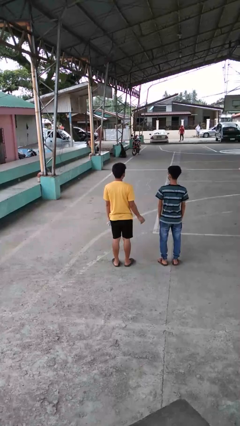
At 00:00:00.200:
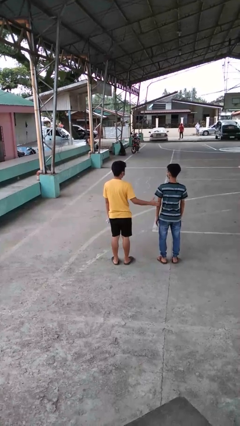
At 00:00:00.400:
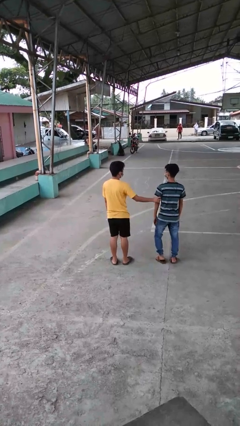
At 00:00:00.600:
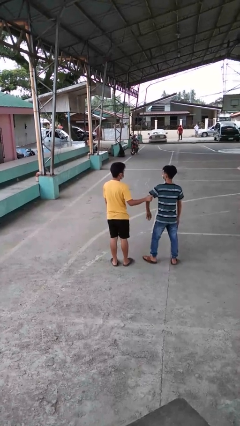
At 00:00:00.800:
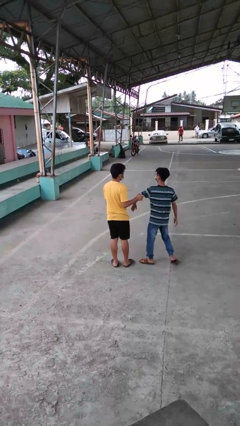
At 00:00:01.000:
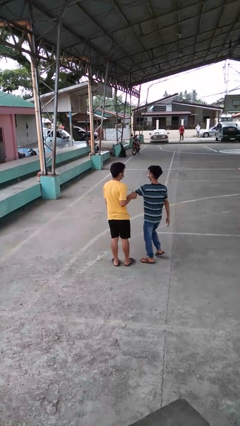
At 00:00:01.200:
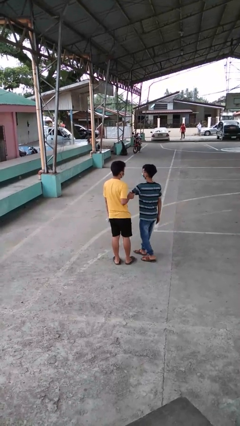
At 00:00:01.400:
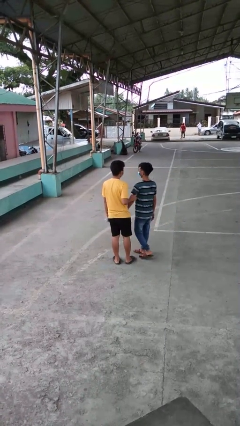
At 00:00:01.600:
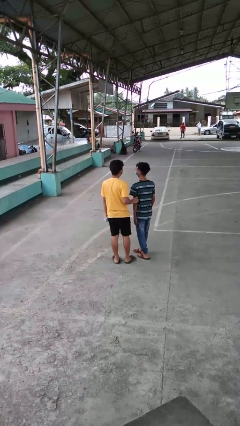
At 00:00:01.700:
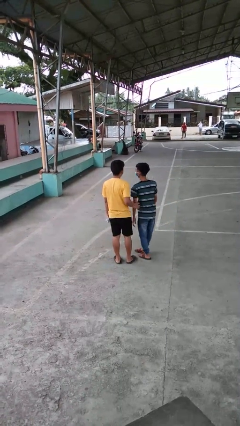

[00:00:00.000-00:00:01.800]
person grabs person by bicep

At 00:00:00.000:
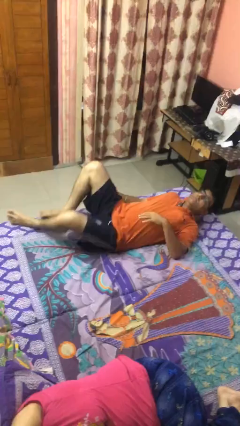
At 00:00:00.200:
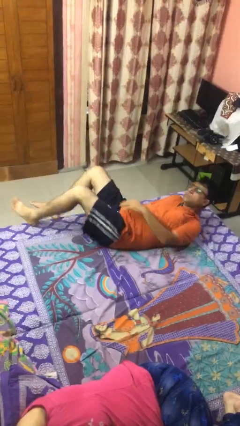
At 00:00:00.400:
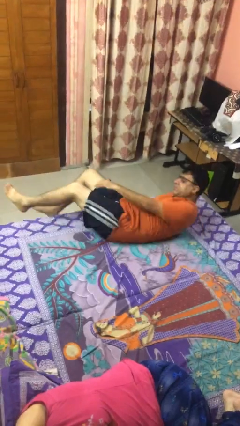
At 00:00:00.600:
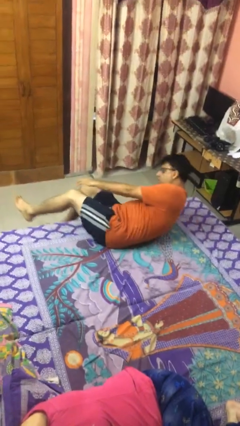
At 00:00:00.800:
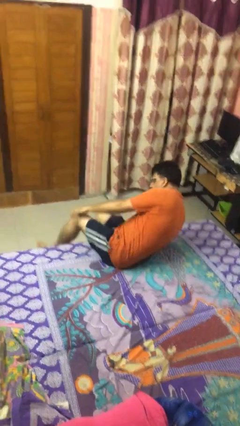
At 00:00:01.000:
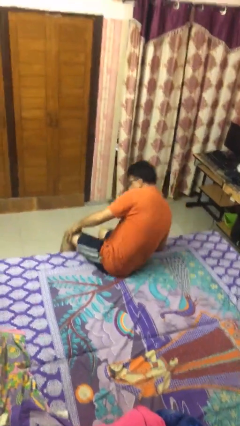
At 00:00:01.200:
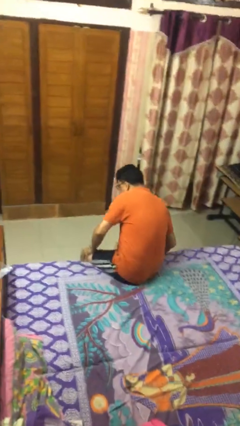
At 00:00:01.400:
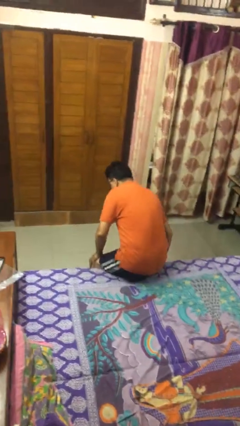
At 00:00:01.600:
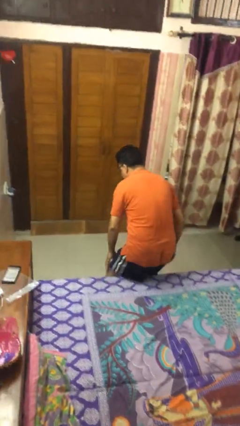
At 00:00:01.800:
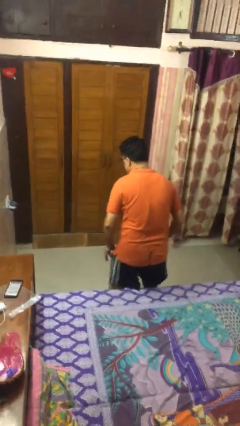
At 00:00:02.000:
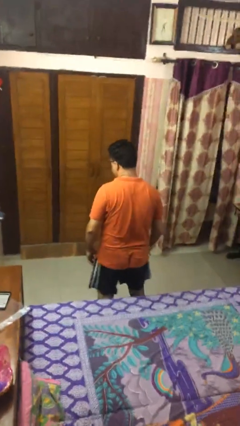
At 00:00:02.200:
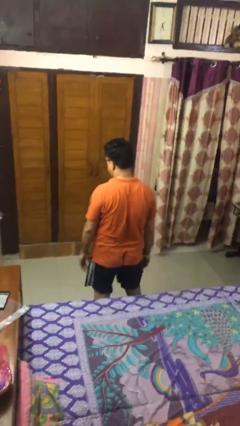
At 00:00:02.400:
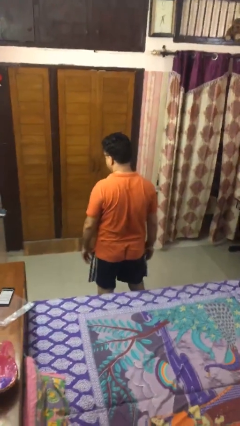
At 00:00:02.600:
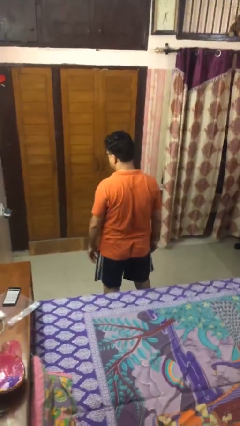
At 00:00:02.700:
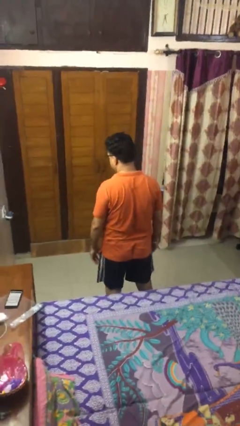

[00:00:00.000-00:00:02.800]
person stands up

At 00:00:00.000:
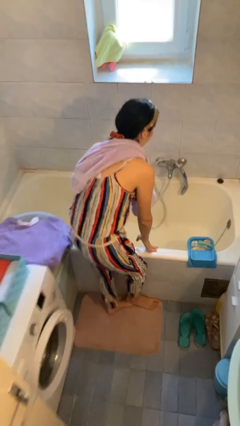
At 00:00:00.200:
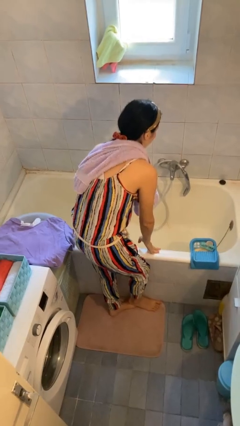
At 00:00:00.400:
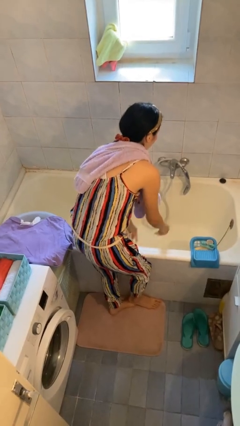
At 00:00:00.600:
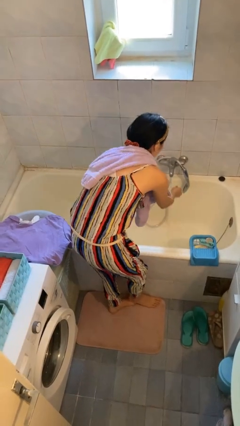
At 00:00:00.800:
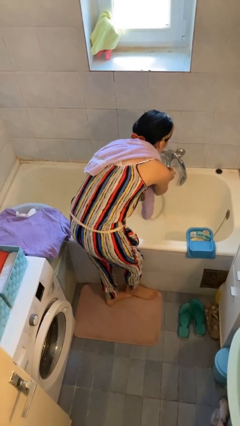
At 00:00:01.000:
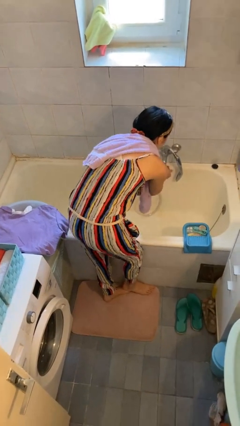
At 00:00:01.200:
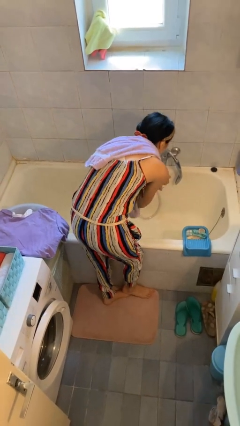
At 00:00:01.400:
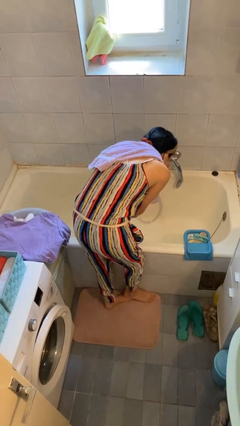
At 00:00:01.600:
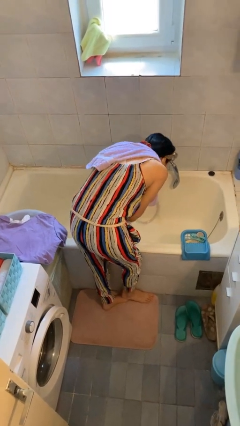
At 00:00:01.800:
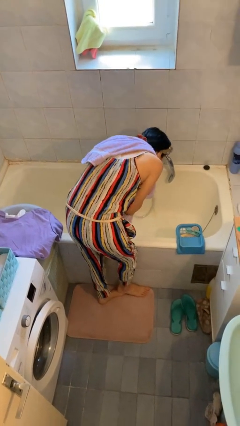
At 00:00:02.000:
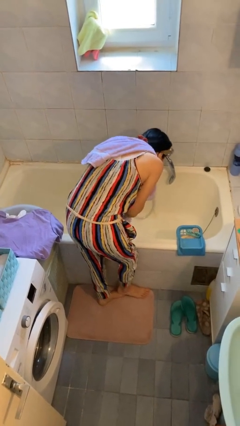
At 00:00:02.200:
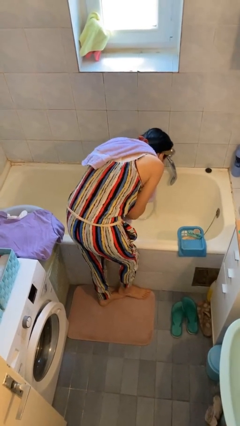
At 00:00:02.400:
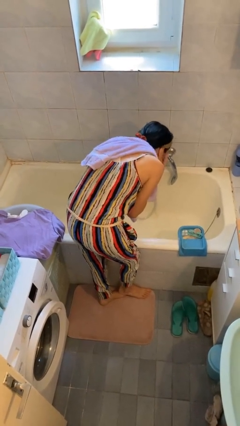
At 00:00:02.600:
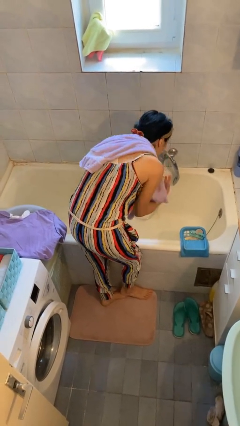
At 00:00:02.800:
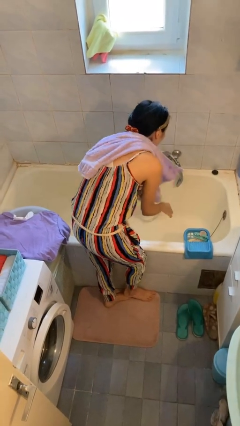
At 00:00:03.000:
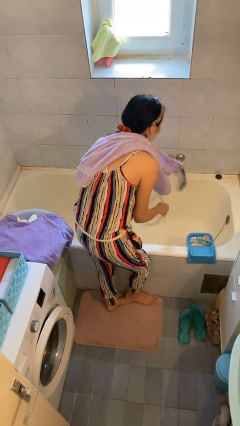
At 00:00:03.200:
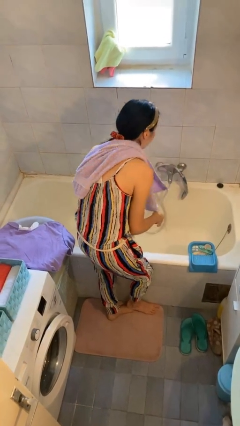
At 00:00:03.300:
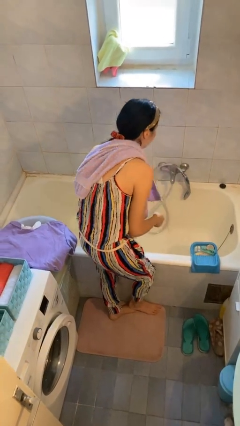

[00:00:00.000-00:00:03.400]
person washes face

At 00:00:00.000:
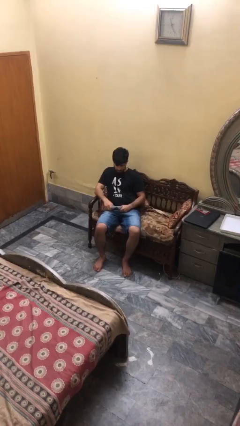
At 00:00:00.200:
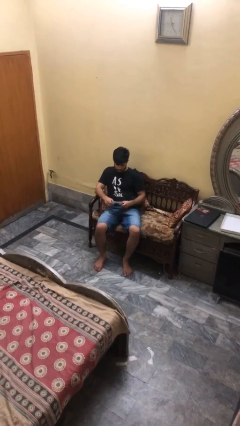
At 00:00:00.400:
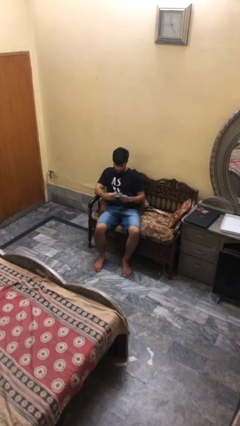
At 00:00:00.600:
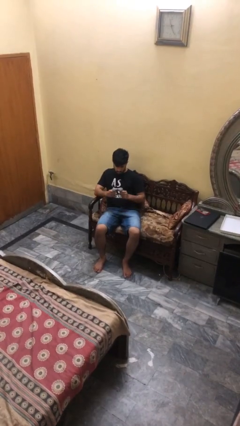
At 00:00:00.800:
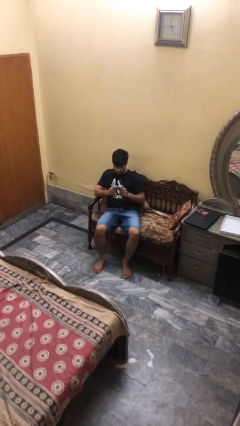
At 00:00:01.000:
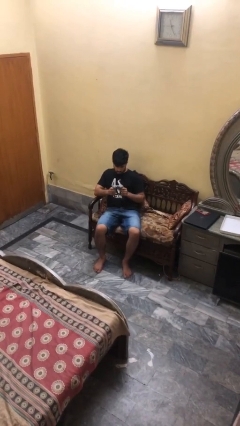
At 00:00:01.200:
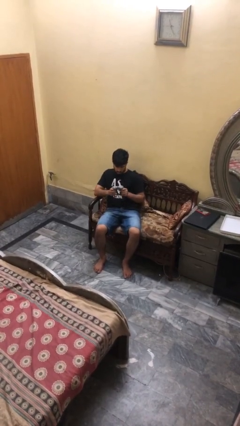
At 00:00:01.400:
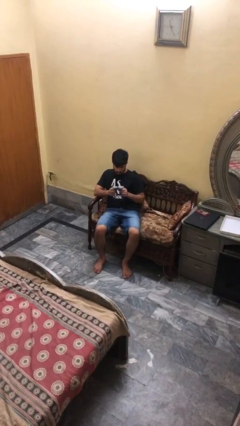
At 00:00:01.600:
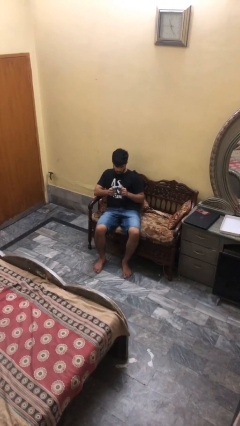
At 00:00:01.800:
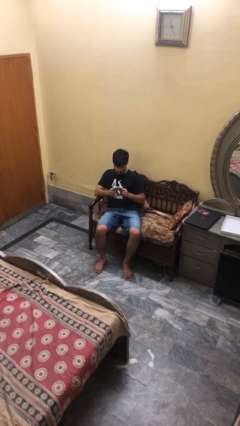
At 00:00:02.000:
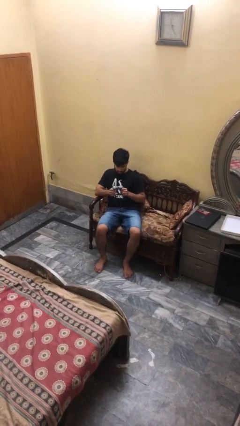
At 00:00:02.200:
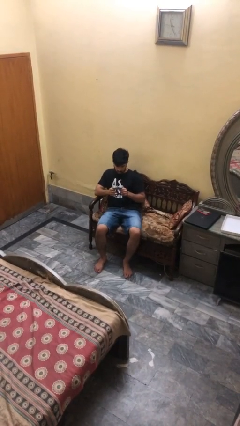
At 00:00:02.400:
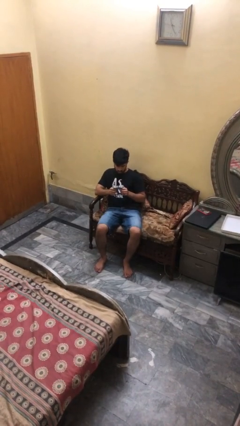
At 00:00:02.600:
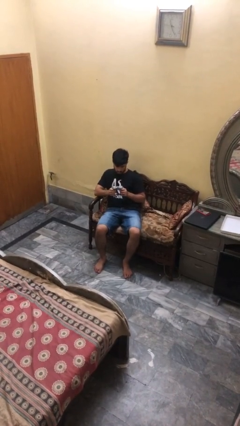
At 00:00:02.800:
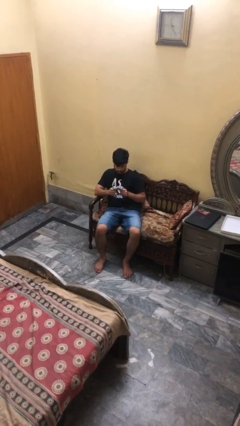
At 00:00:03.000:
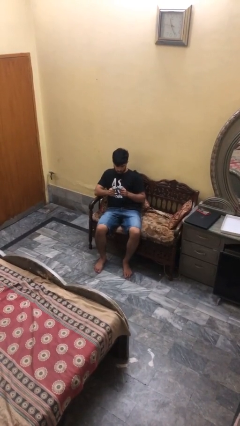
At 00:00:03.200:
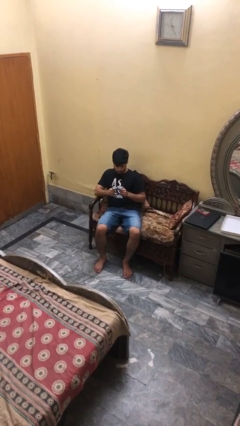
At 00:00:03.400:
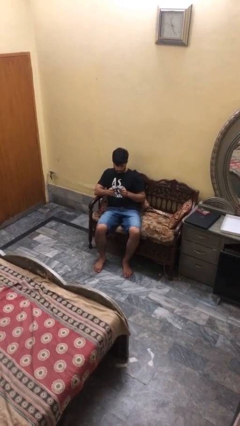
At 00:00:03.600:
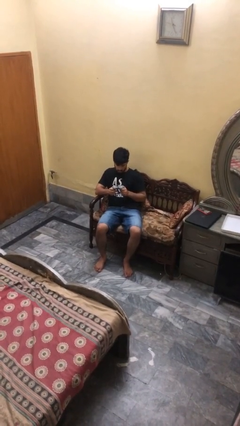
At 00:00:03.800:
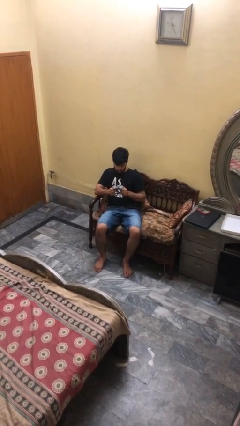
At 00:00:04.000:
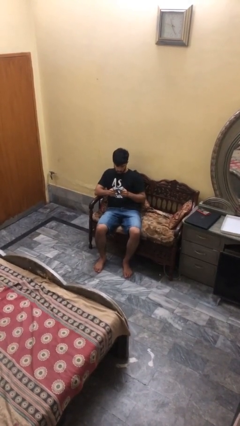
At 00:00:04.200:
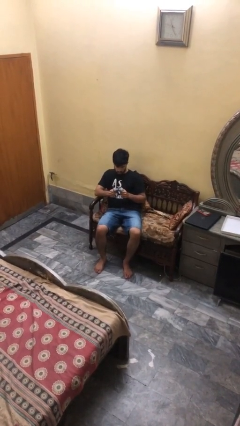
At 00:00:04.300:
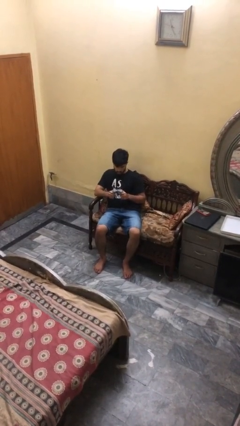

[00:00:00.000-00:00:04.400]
person interacts with handheld game

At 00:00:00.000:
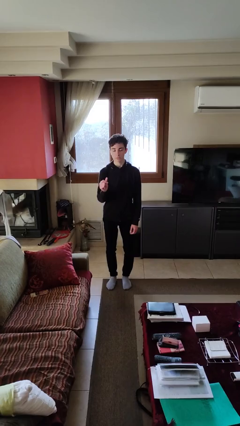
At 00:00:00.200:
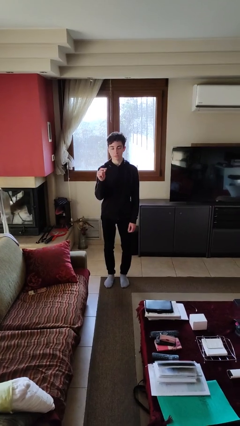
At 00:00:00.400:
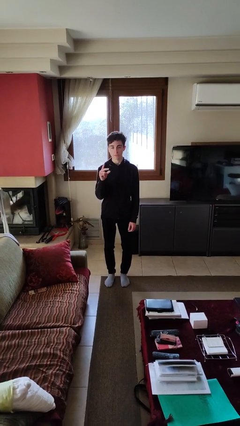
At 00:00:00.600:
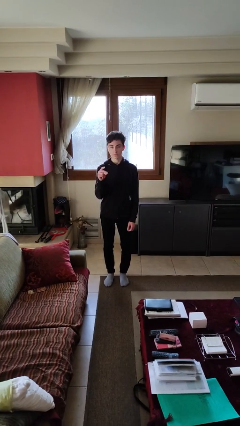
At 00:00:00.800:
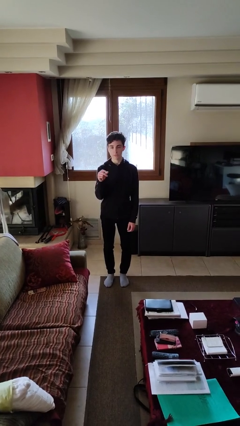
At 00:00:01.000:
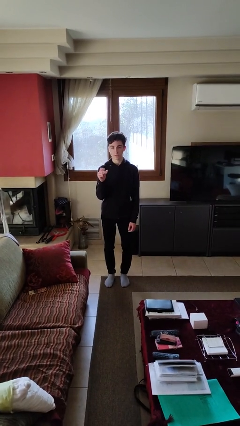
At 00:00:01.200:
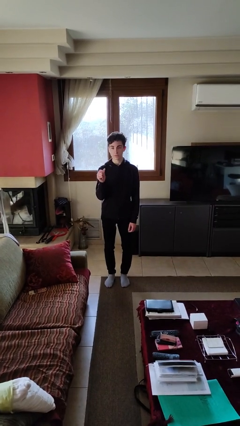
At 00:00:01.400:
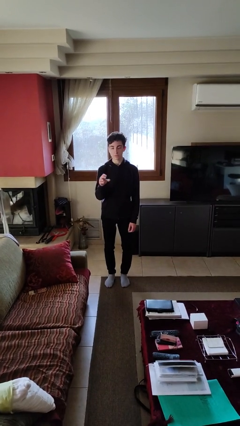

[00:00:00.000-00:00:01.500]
person snaps fingers

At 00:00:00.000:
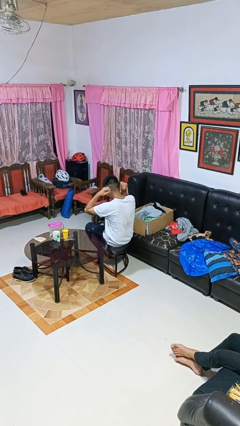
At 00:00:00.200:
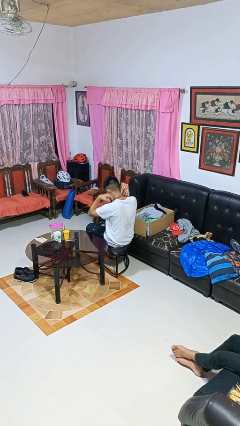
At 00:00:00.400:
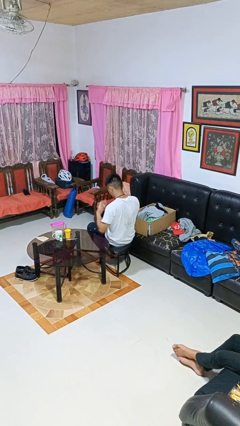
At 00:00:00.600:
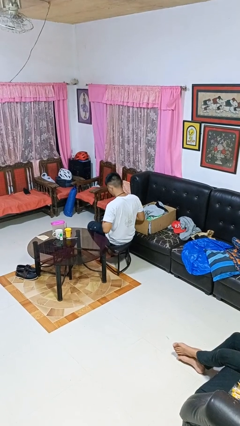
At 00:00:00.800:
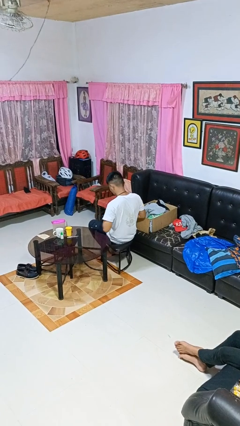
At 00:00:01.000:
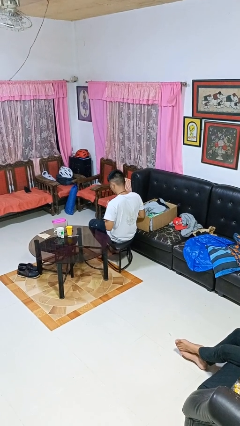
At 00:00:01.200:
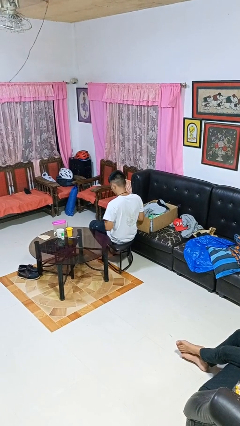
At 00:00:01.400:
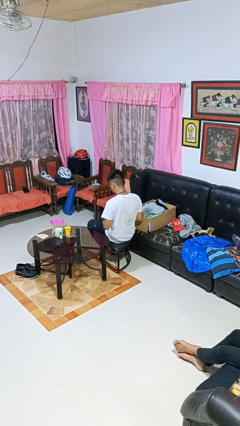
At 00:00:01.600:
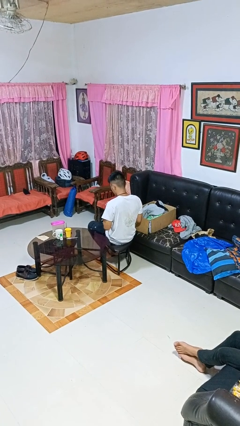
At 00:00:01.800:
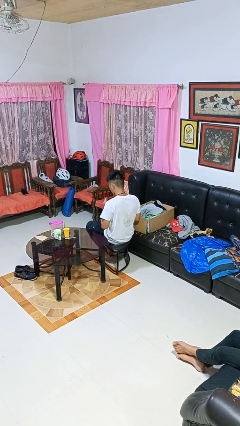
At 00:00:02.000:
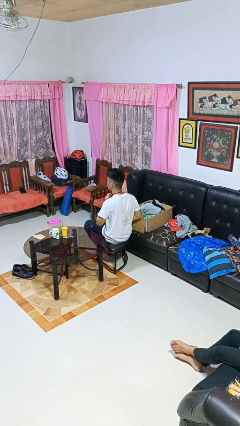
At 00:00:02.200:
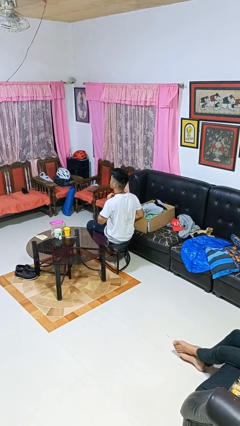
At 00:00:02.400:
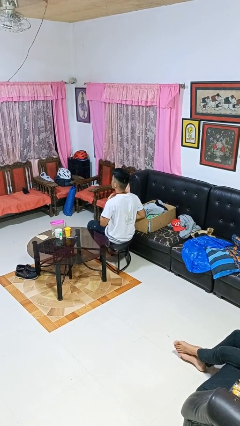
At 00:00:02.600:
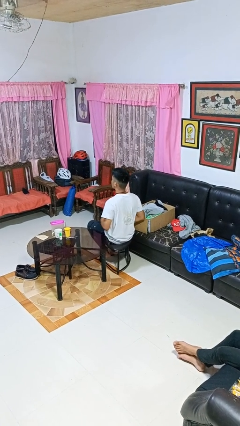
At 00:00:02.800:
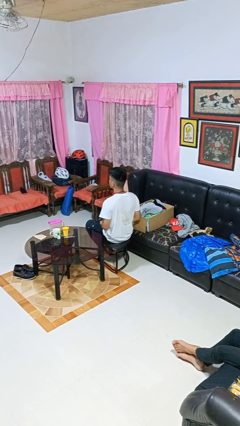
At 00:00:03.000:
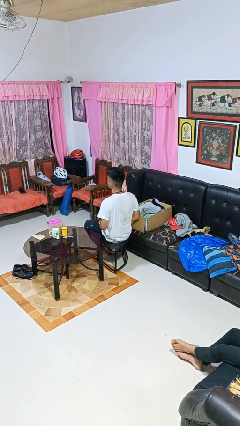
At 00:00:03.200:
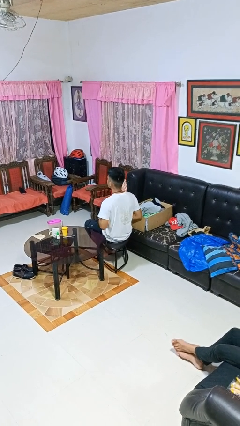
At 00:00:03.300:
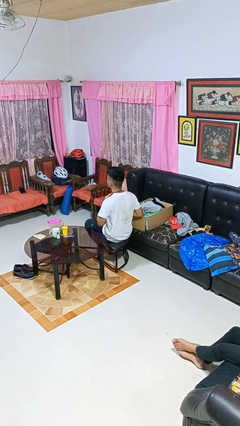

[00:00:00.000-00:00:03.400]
person puts on necktie
